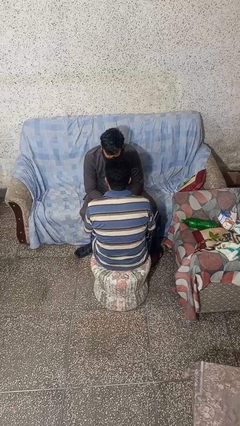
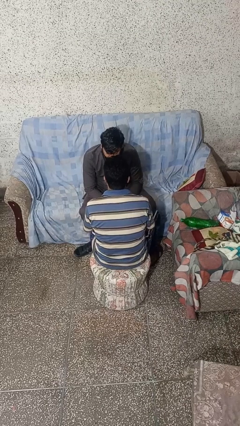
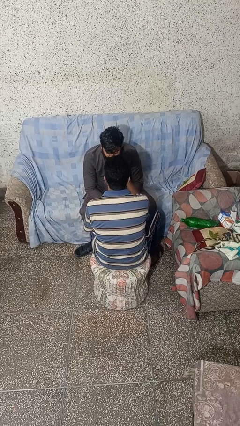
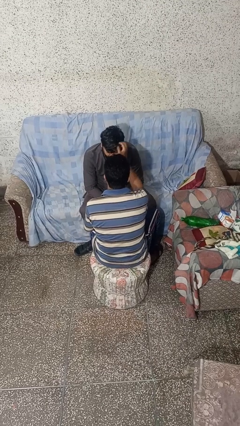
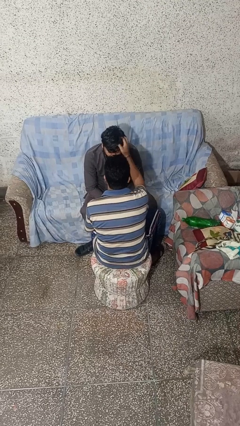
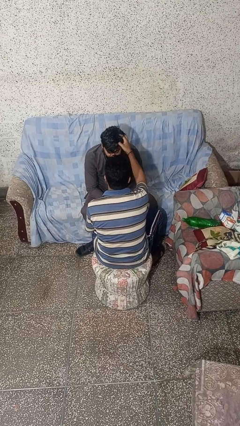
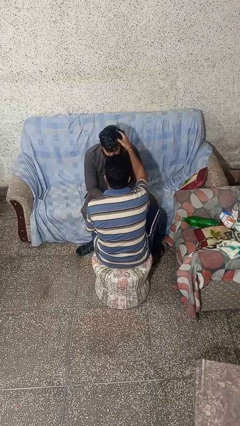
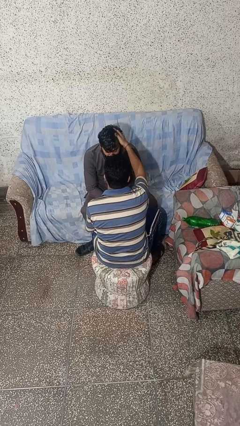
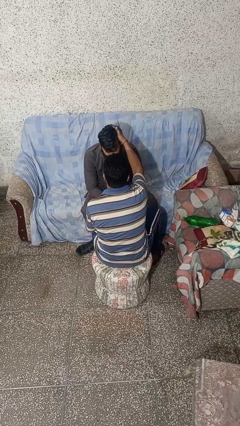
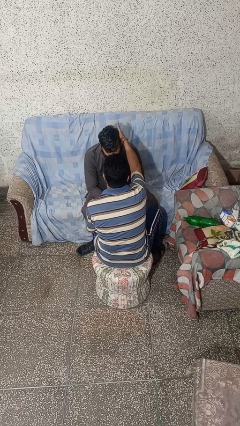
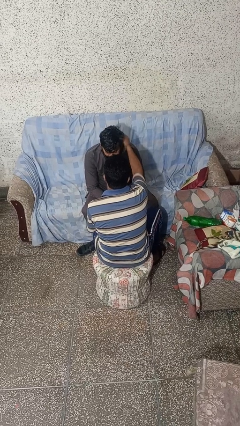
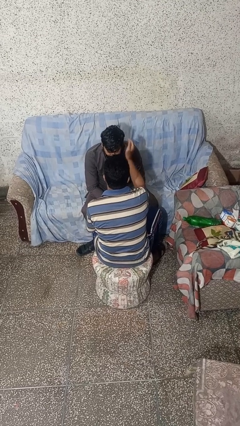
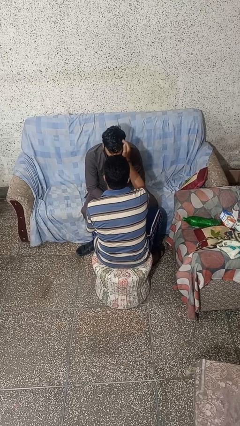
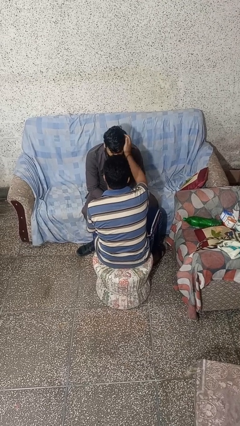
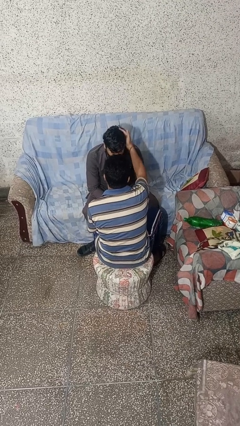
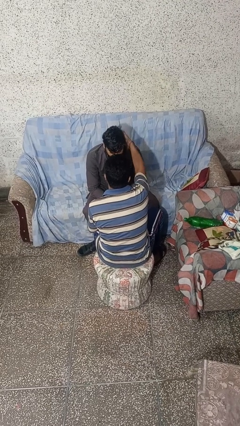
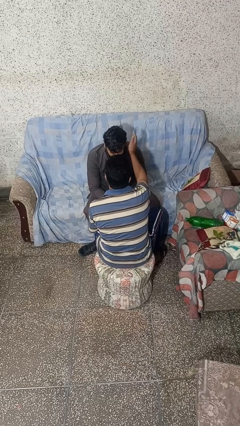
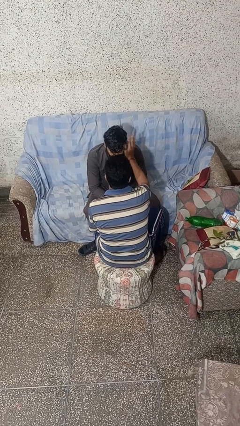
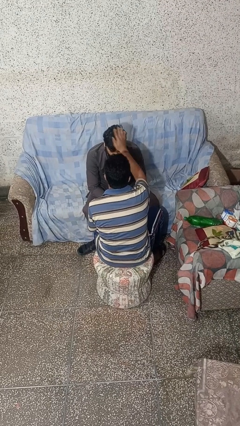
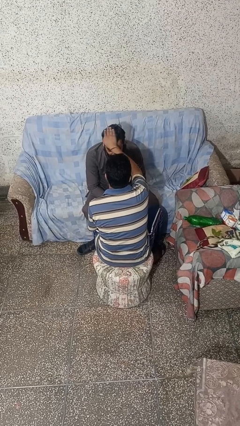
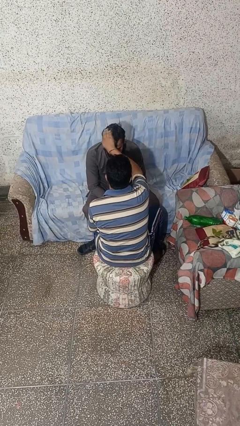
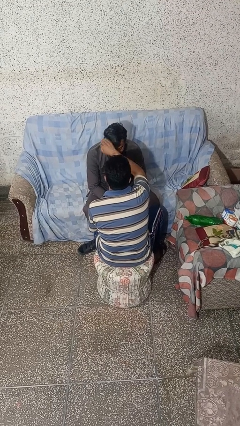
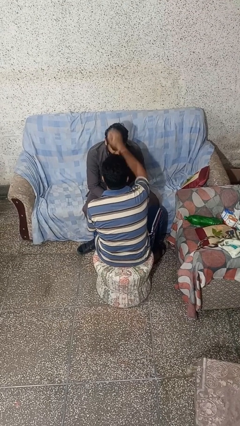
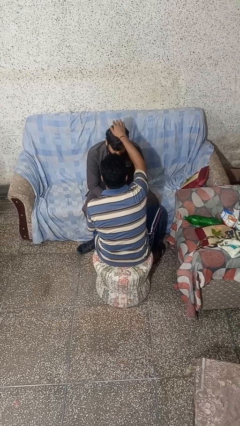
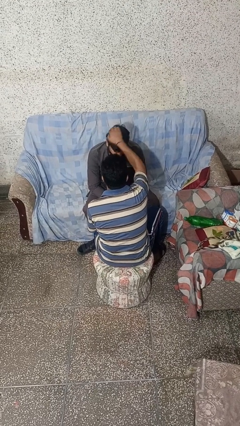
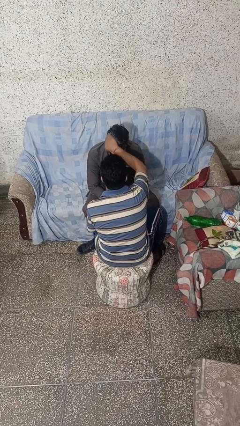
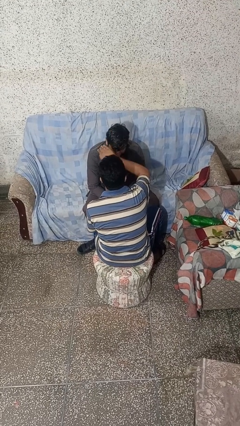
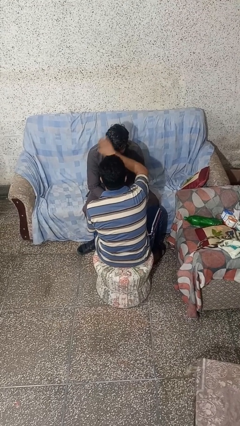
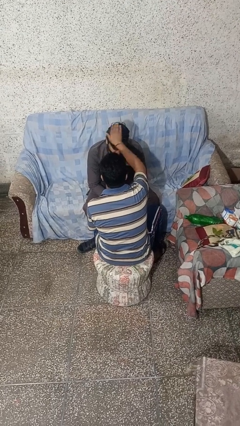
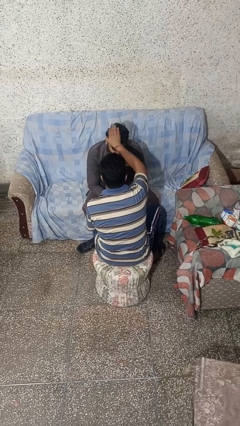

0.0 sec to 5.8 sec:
person braids hair of person

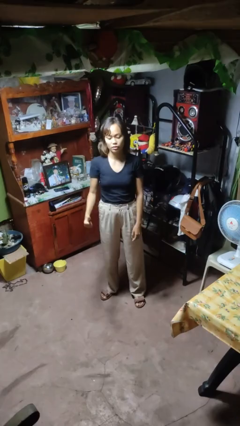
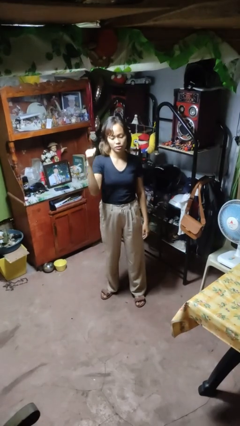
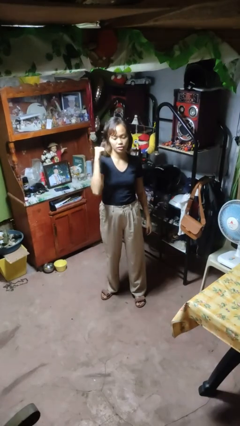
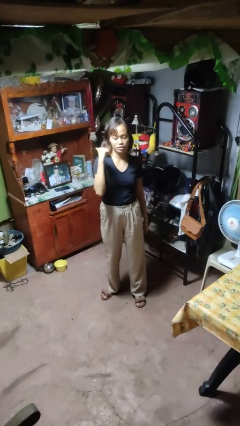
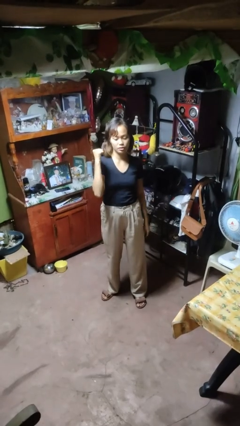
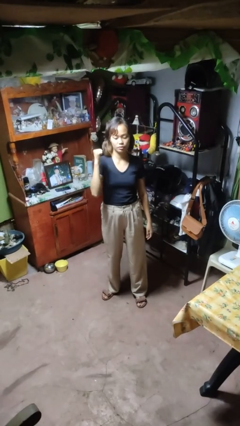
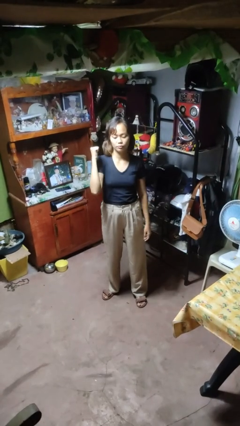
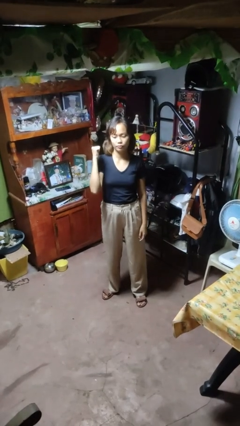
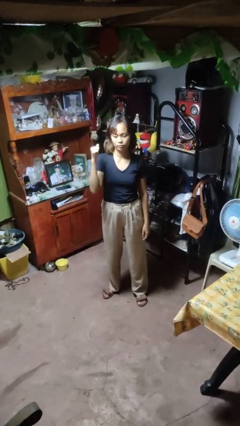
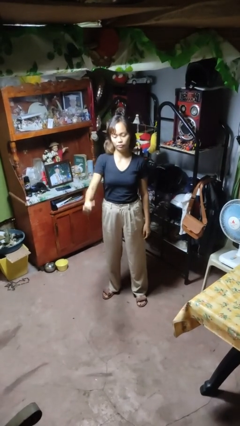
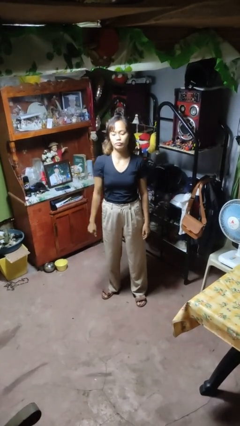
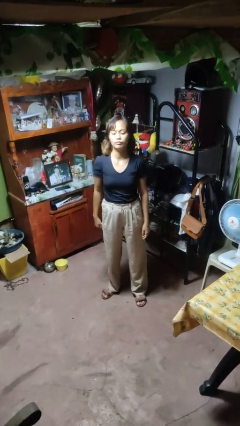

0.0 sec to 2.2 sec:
person gestures behind me

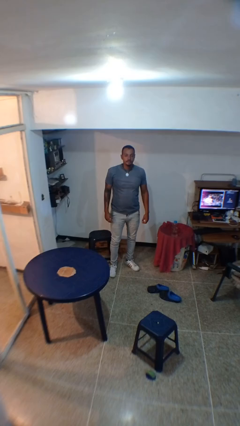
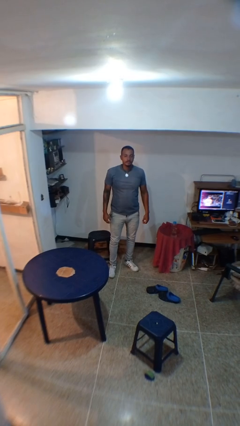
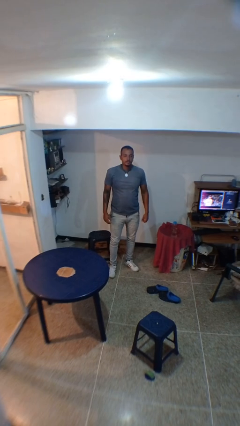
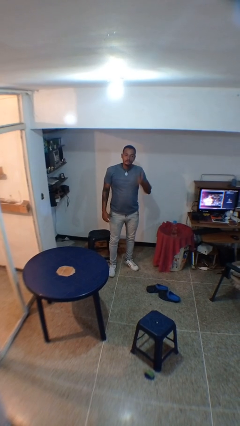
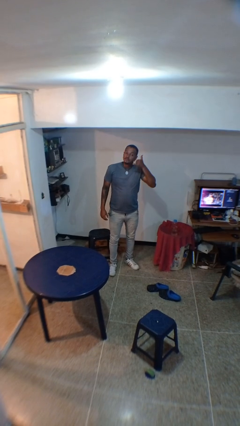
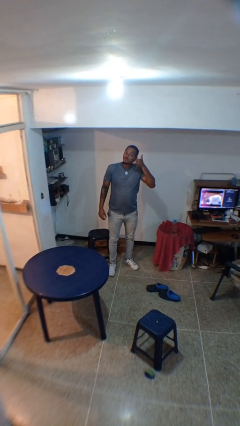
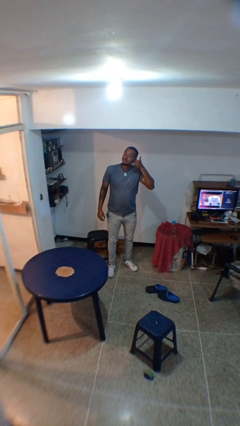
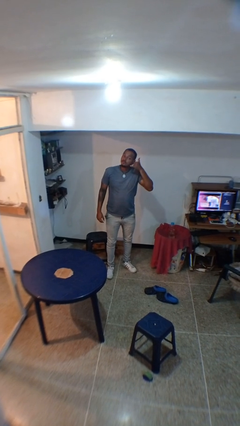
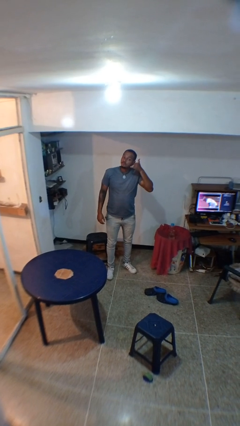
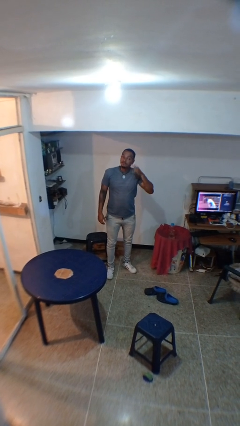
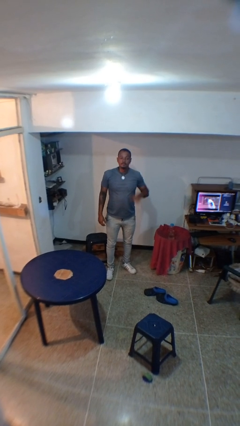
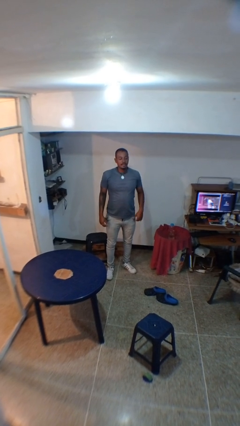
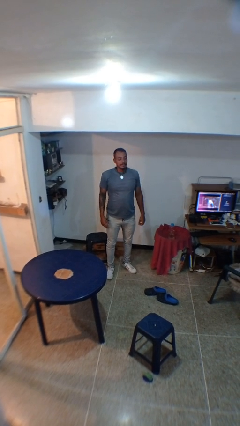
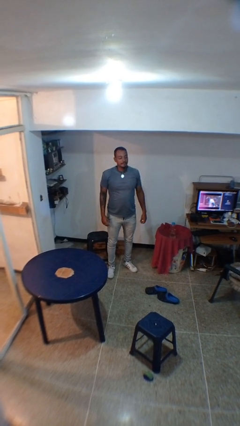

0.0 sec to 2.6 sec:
person gestures call me

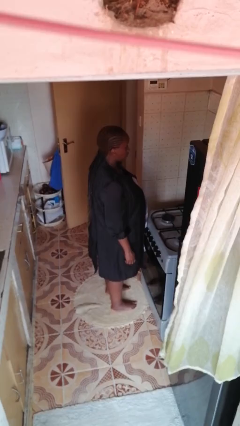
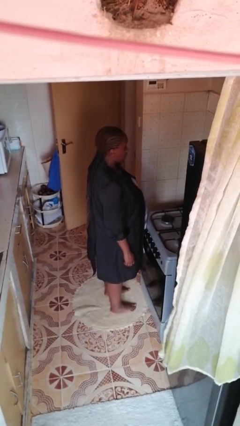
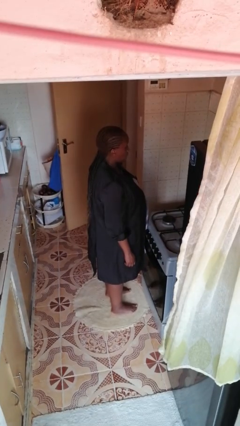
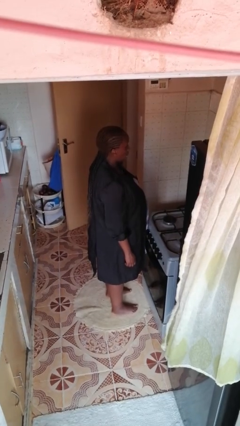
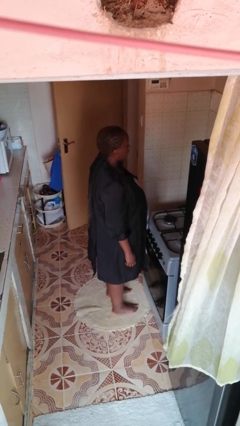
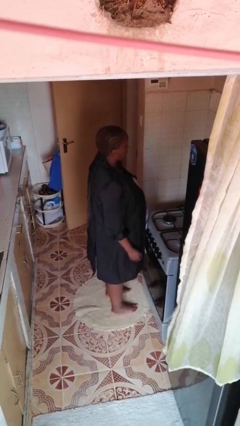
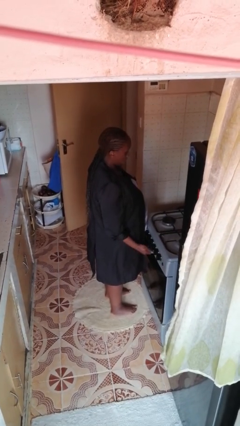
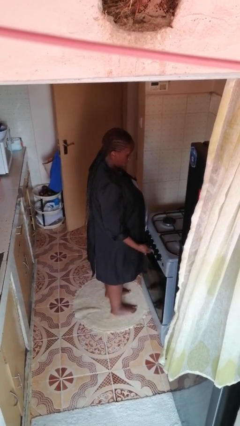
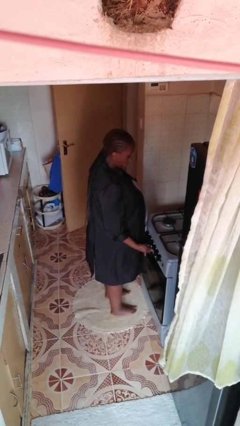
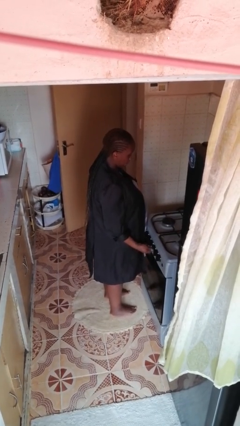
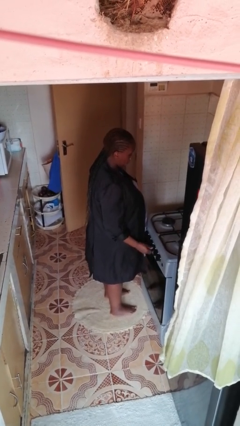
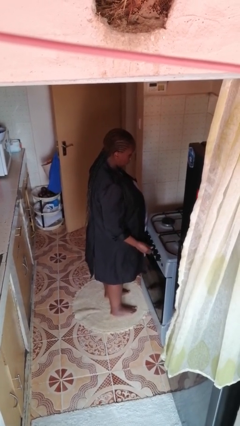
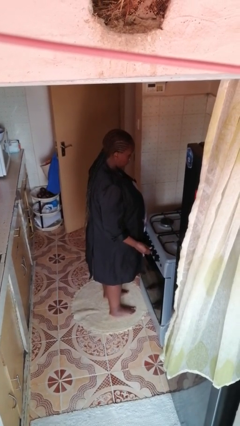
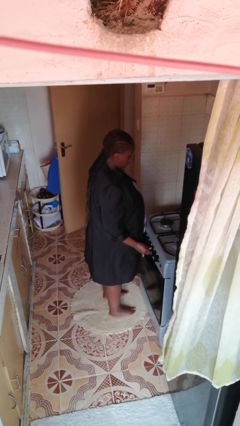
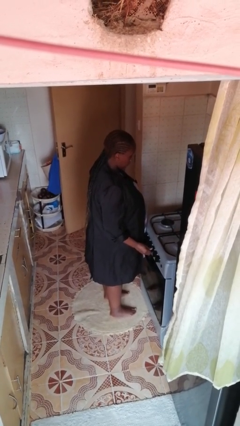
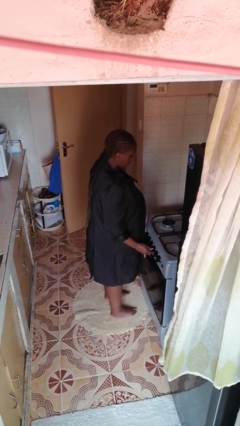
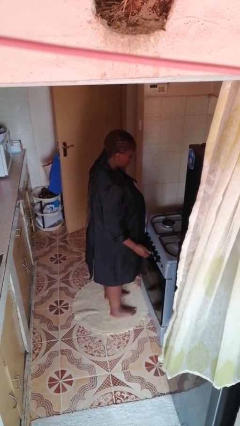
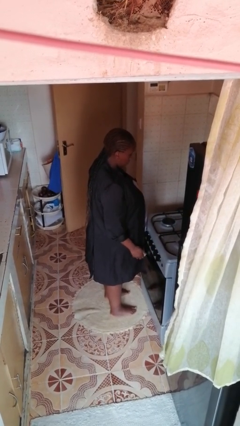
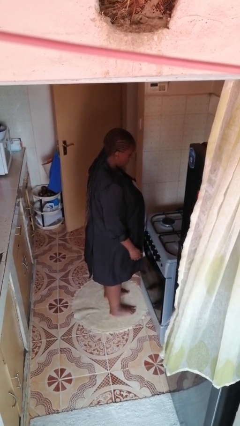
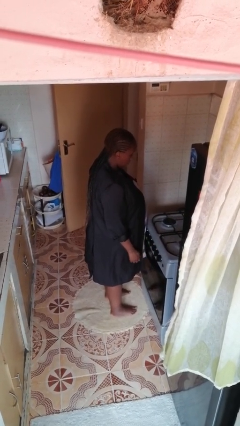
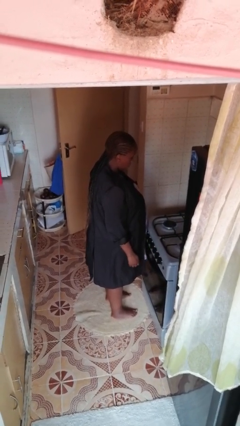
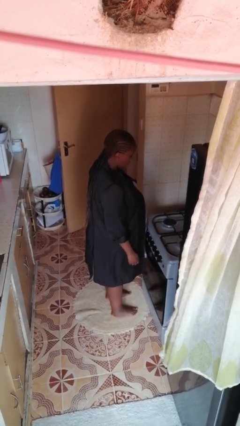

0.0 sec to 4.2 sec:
person turns on stovetop

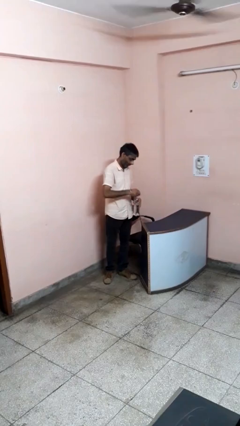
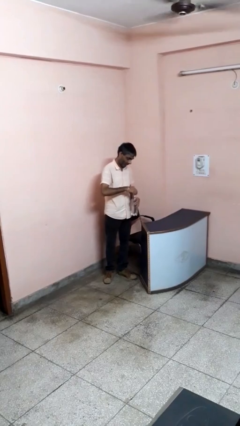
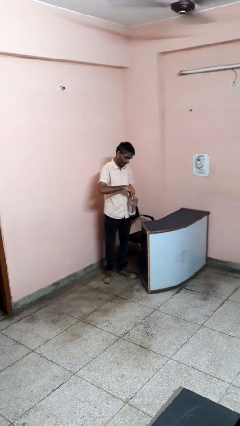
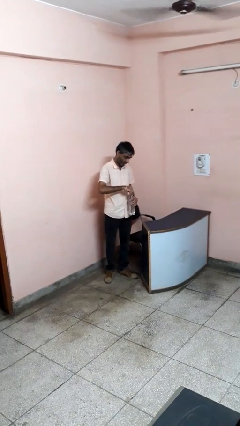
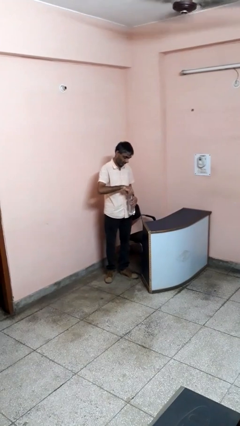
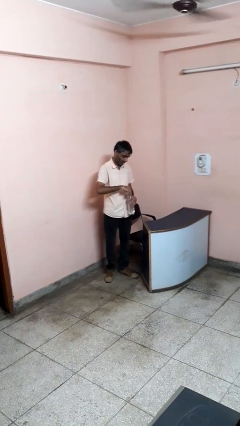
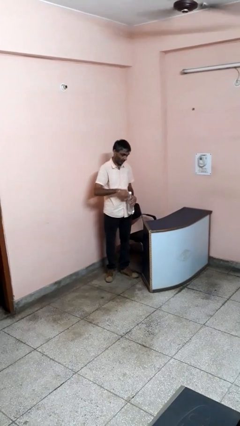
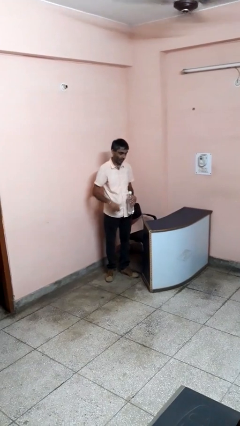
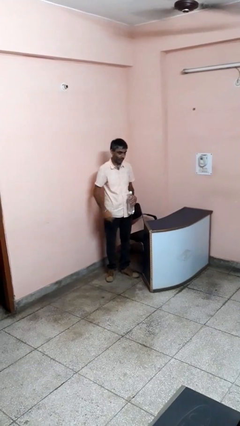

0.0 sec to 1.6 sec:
person screws lid to bottle

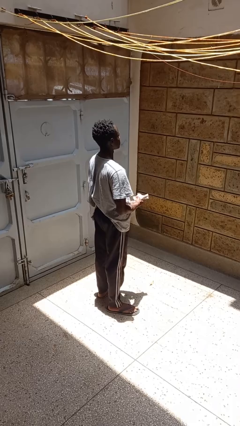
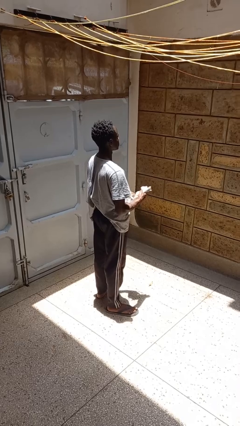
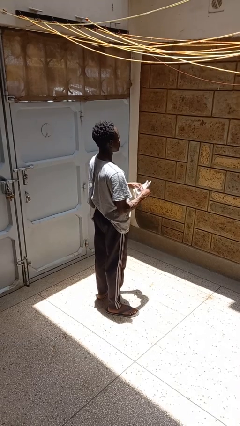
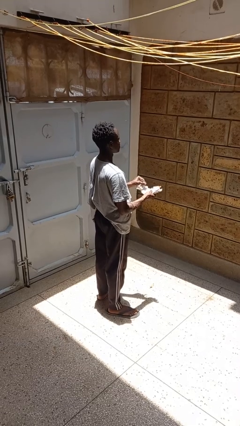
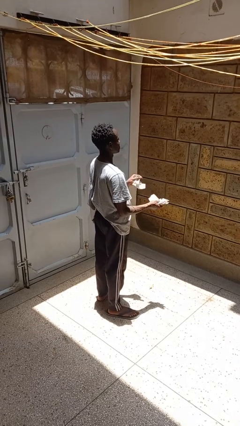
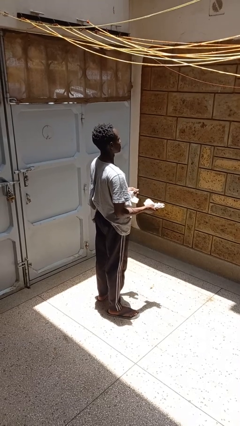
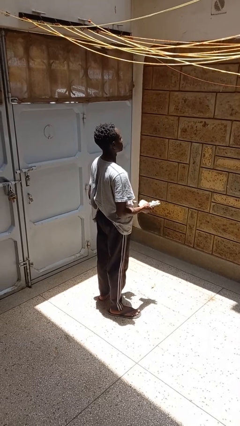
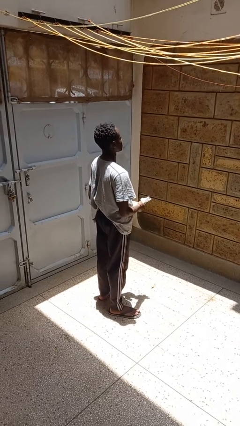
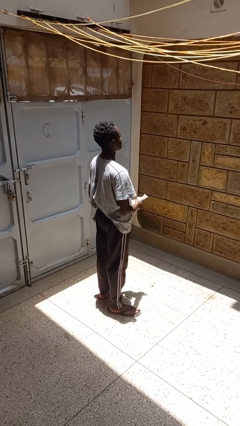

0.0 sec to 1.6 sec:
person tears paper
